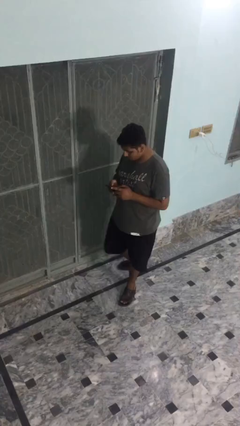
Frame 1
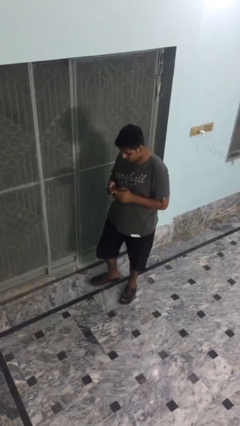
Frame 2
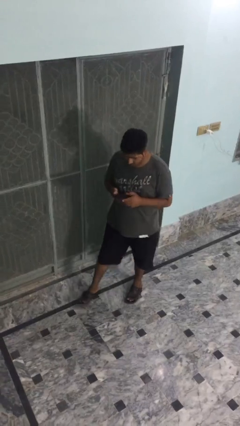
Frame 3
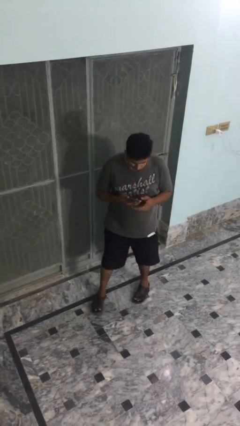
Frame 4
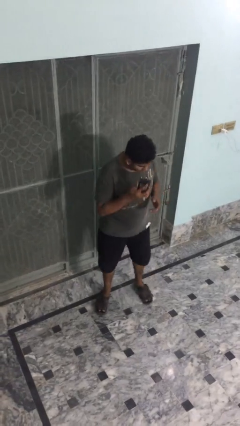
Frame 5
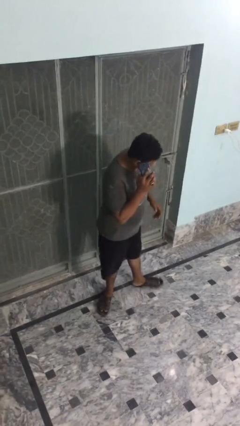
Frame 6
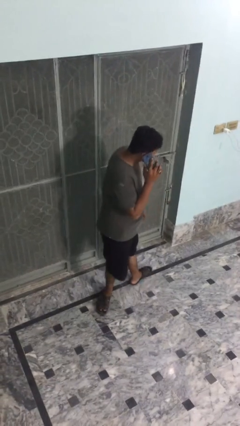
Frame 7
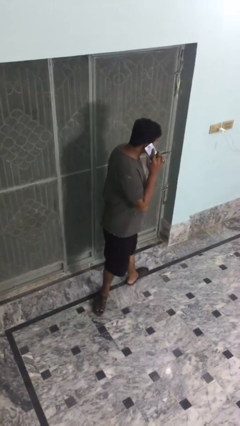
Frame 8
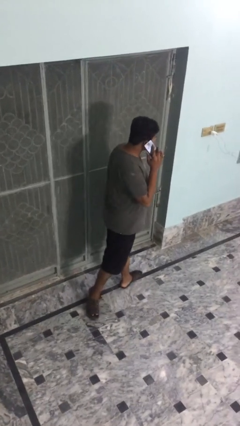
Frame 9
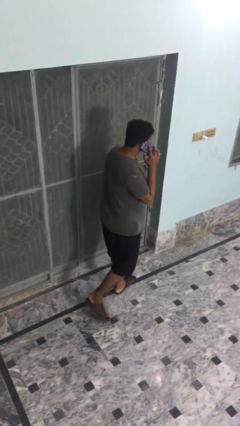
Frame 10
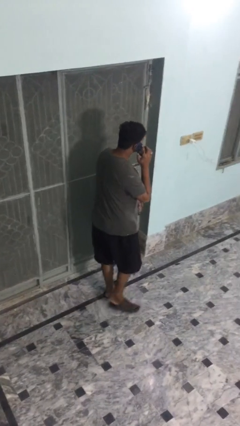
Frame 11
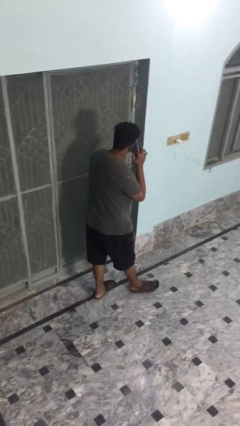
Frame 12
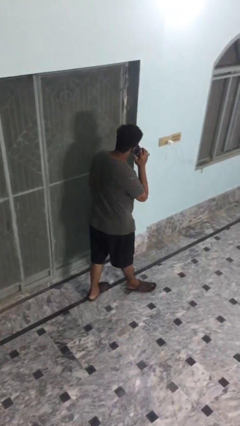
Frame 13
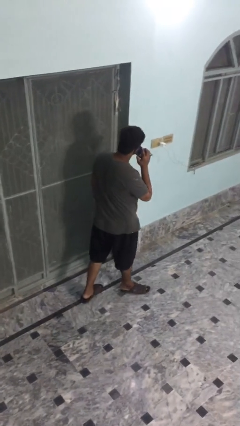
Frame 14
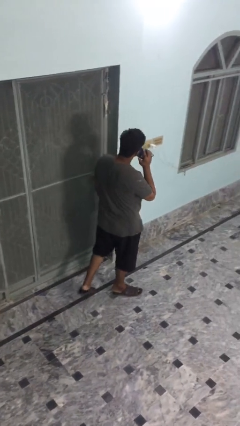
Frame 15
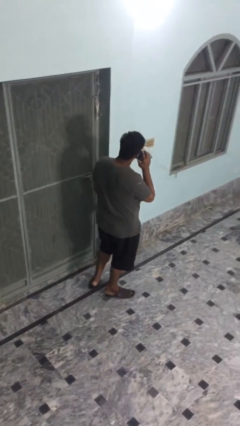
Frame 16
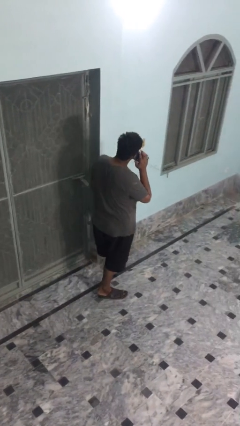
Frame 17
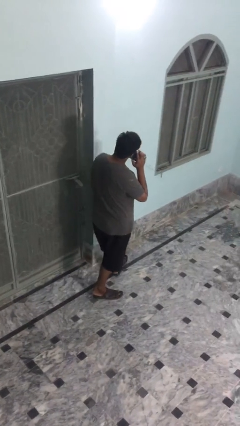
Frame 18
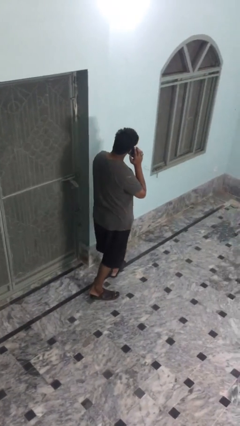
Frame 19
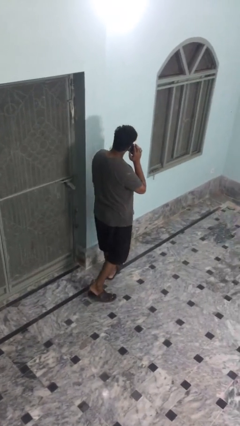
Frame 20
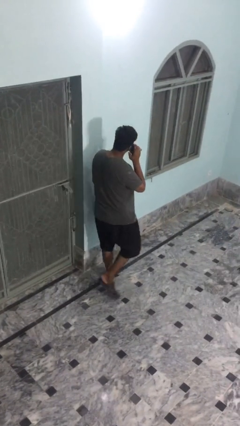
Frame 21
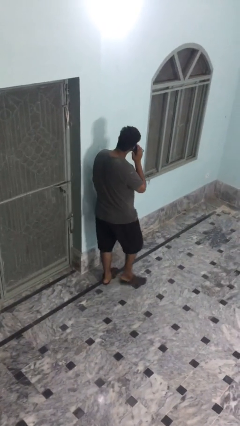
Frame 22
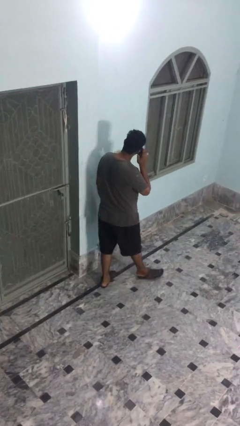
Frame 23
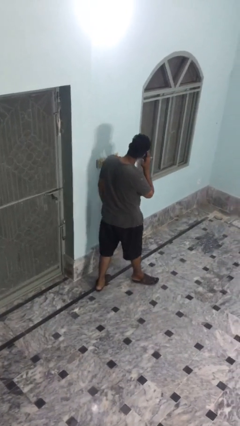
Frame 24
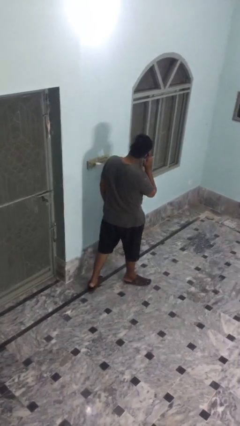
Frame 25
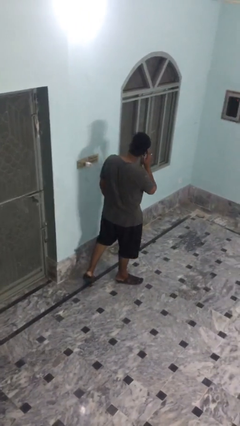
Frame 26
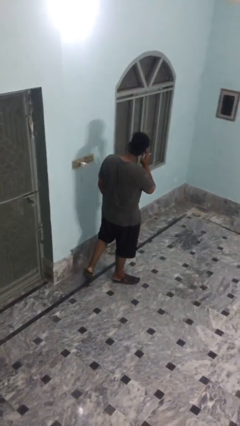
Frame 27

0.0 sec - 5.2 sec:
person talks on phone

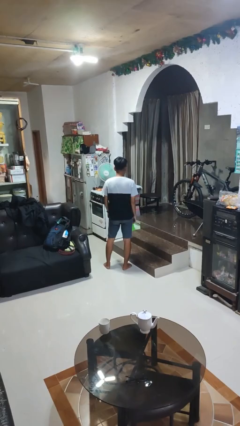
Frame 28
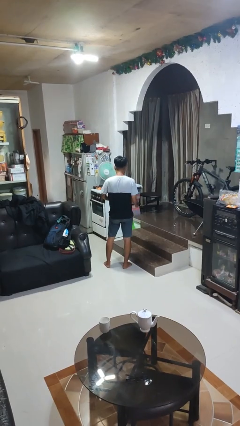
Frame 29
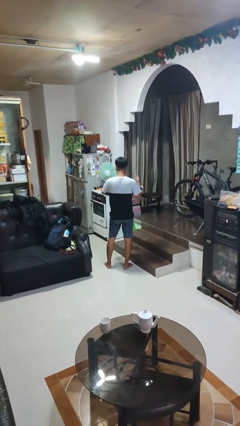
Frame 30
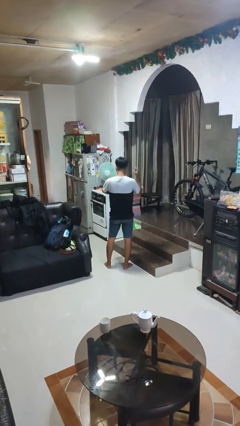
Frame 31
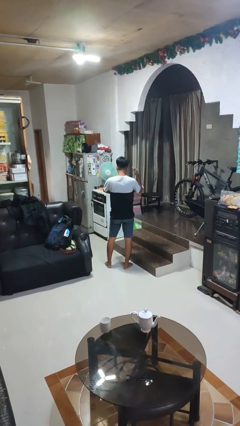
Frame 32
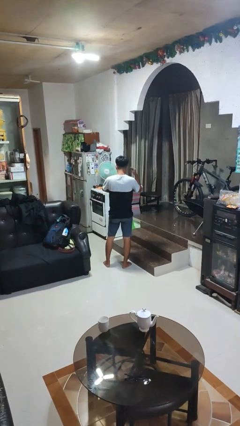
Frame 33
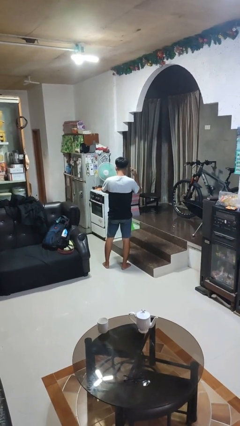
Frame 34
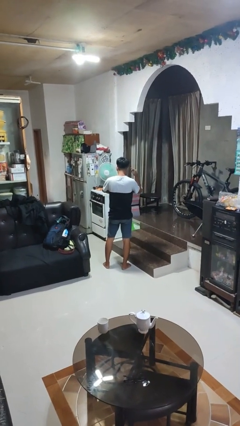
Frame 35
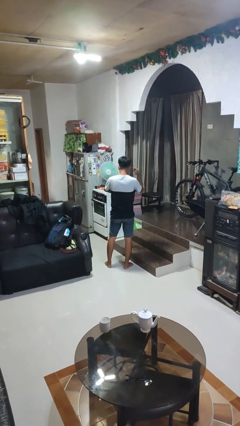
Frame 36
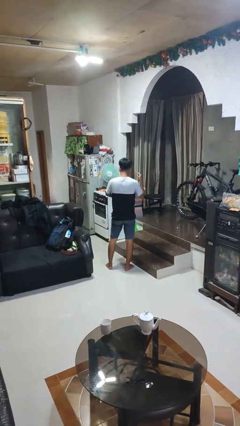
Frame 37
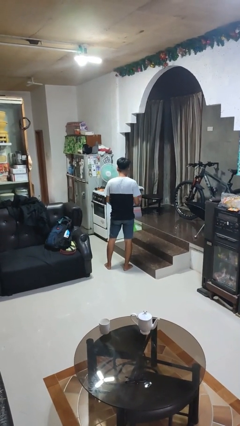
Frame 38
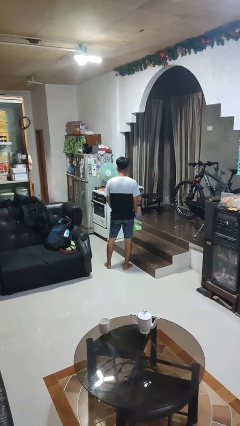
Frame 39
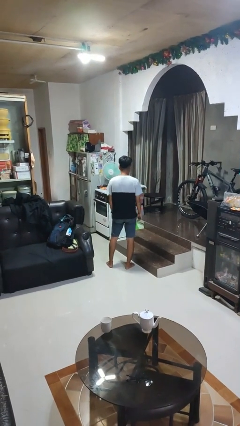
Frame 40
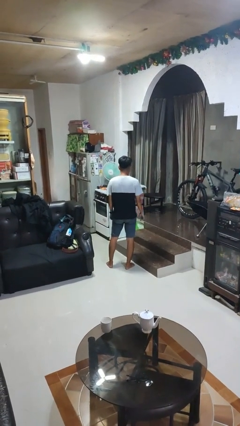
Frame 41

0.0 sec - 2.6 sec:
person gestures listen closely

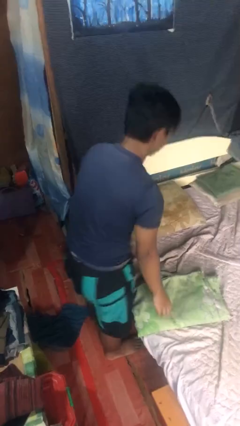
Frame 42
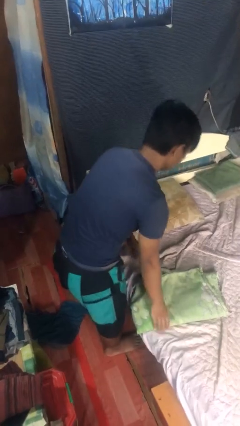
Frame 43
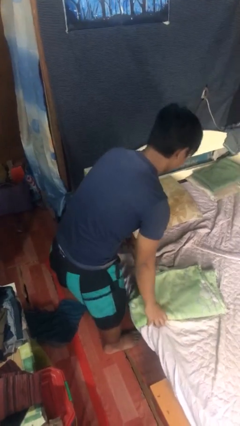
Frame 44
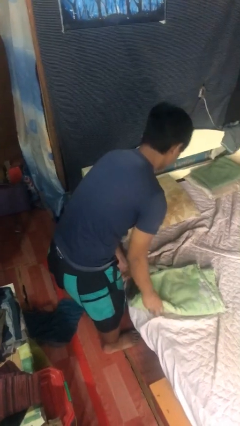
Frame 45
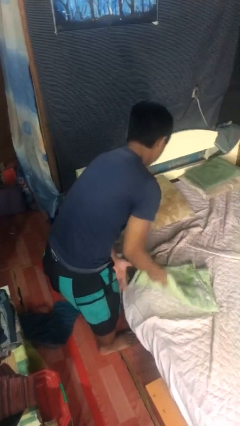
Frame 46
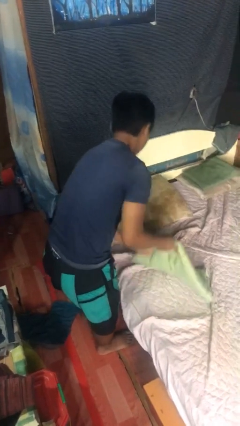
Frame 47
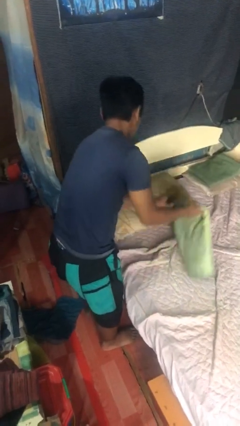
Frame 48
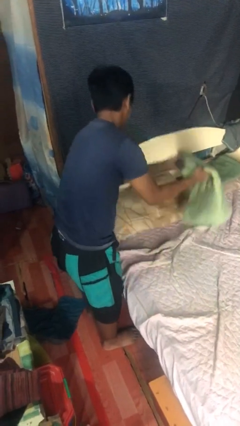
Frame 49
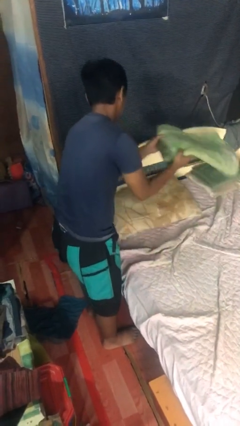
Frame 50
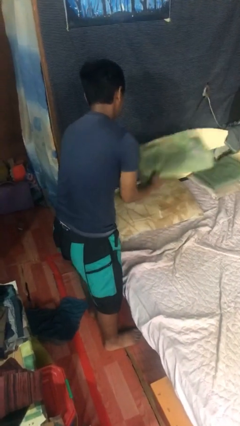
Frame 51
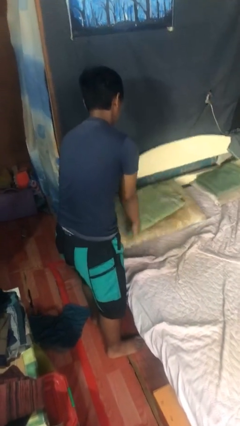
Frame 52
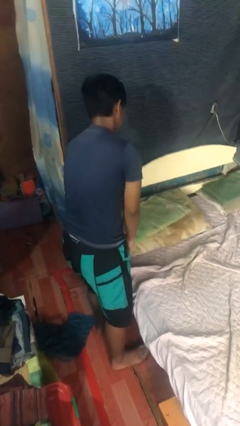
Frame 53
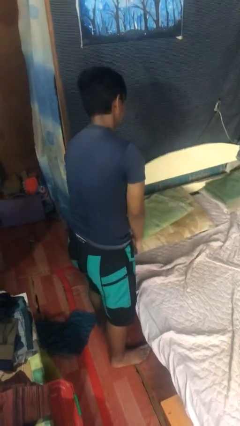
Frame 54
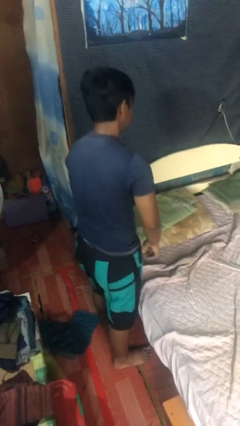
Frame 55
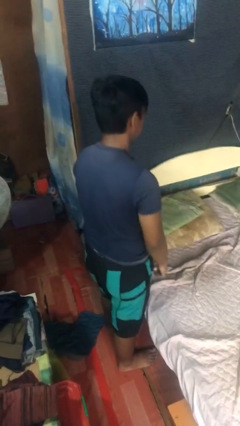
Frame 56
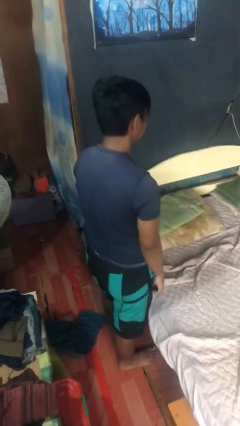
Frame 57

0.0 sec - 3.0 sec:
person makes bed

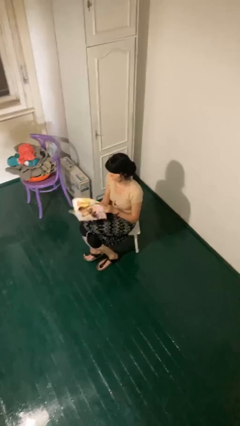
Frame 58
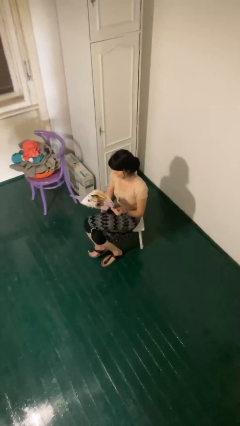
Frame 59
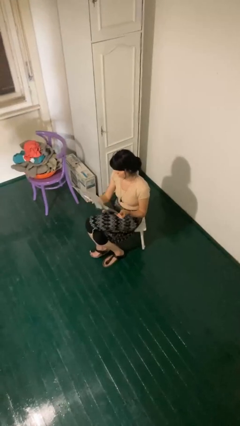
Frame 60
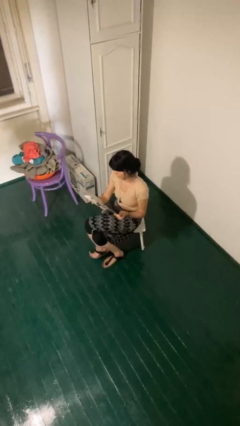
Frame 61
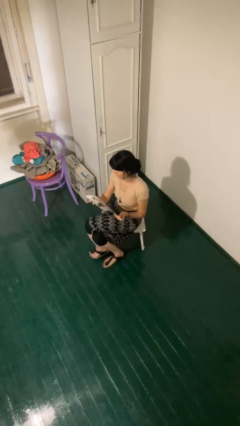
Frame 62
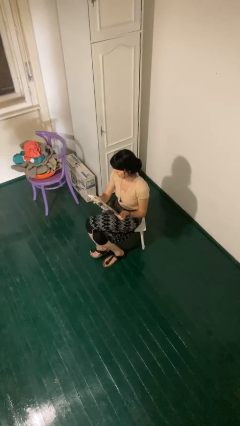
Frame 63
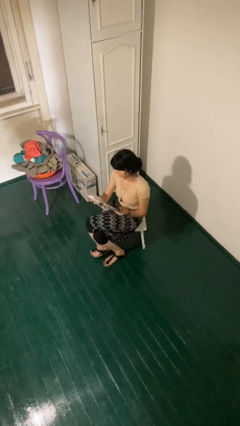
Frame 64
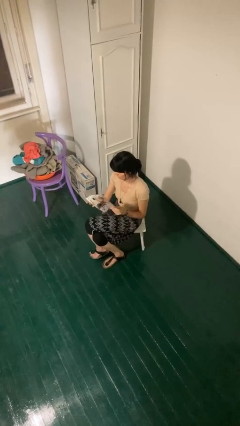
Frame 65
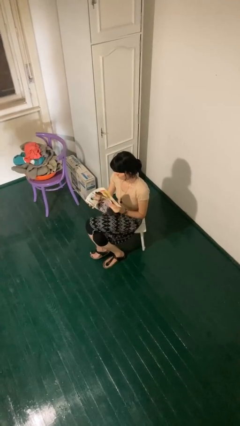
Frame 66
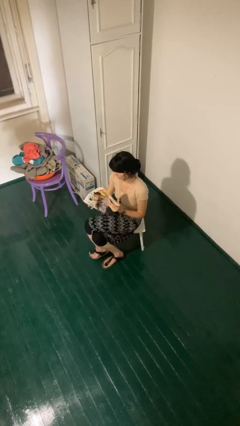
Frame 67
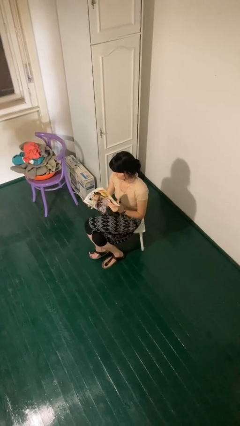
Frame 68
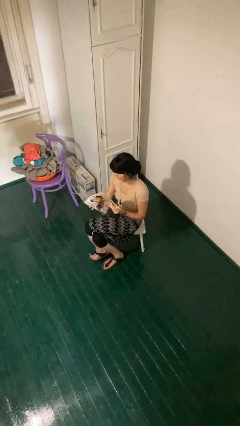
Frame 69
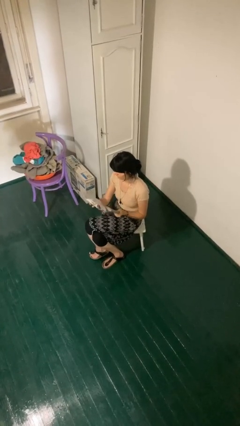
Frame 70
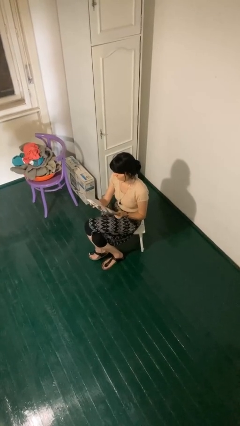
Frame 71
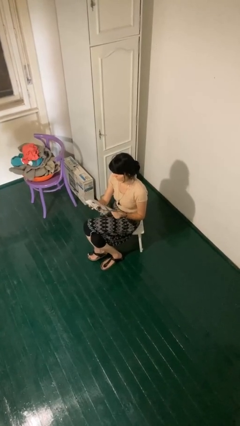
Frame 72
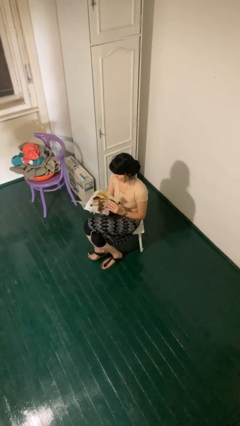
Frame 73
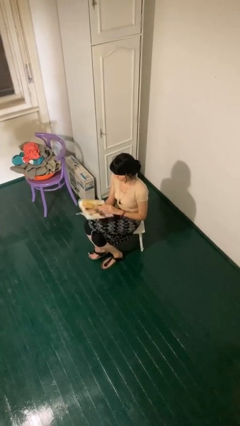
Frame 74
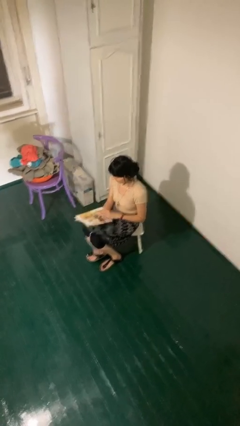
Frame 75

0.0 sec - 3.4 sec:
person reads magazine

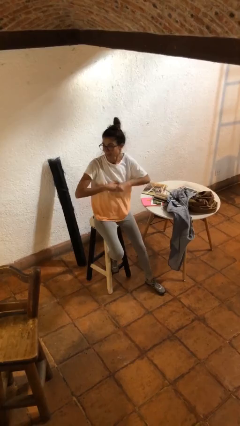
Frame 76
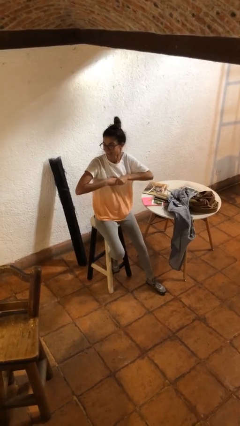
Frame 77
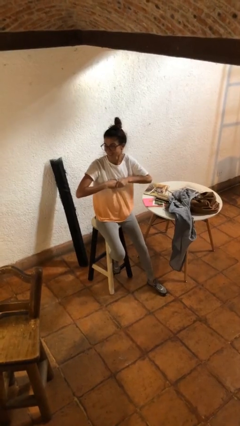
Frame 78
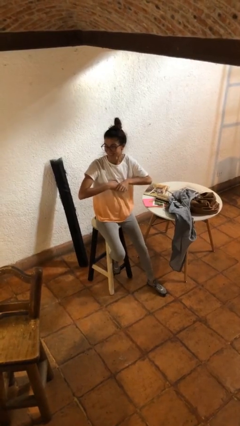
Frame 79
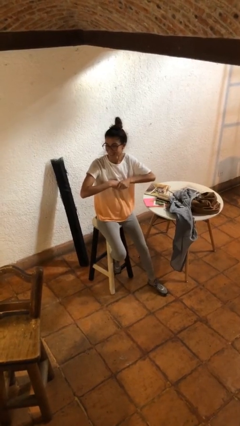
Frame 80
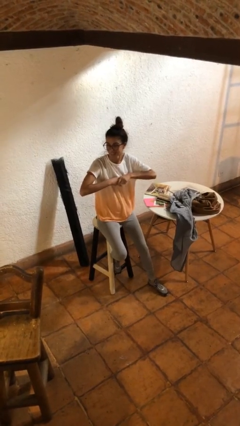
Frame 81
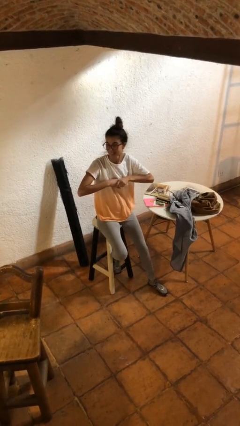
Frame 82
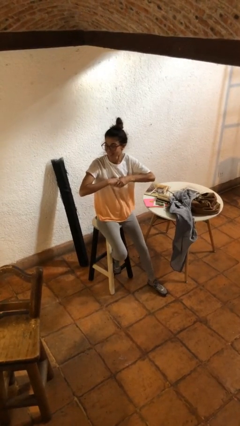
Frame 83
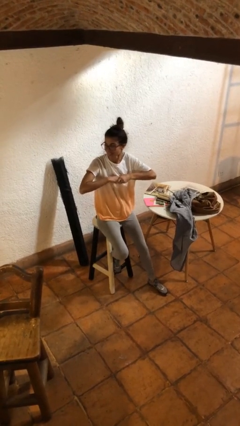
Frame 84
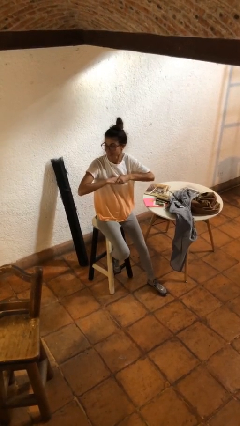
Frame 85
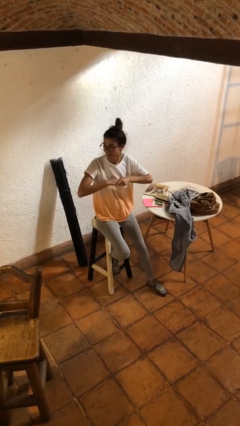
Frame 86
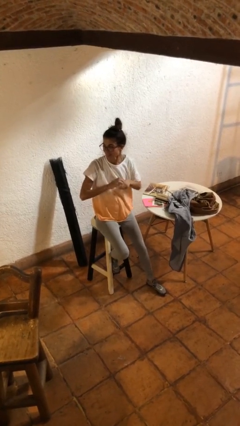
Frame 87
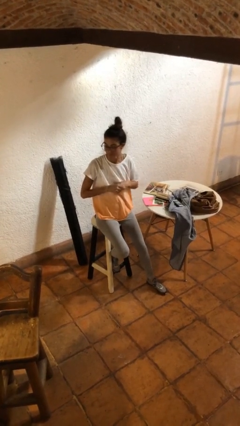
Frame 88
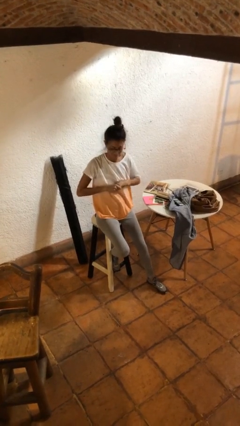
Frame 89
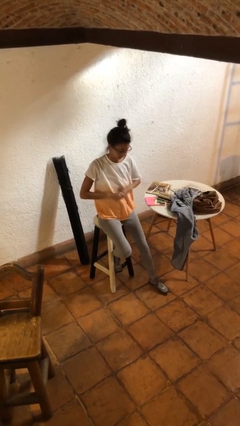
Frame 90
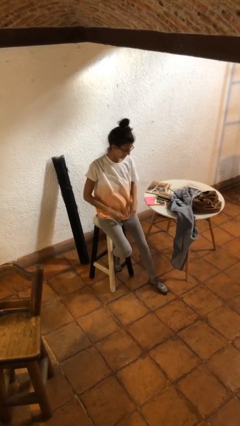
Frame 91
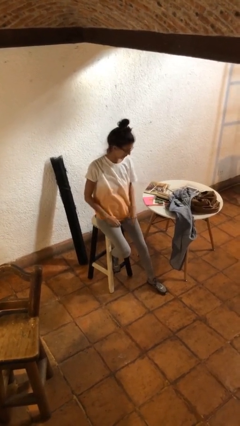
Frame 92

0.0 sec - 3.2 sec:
person cracks knuckles

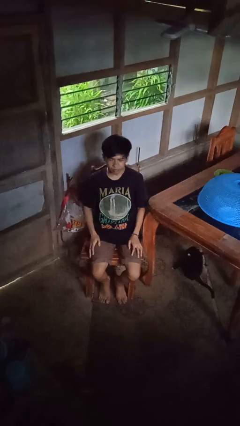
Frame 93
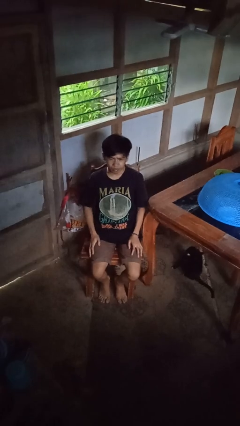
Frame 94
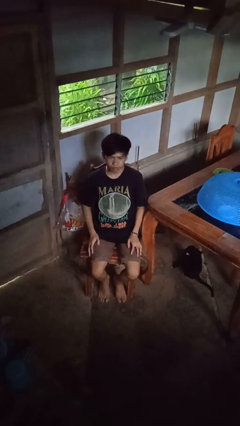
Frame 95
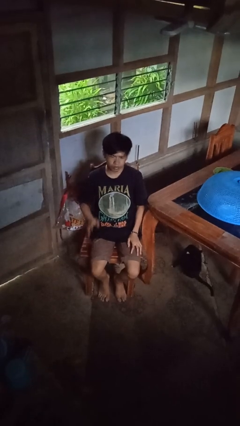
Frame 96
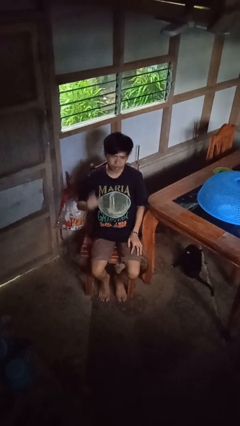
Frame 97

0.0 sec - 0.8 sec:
person gestures stop
